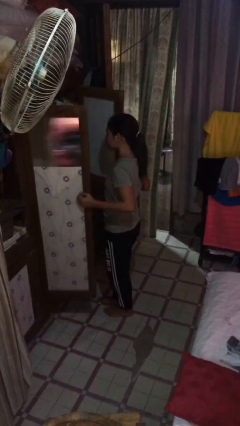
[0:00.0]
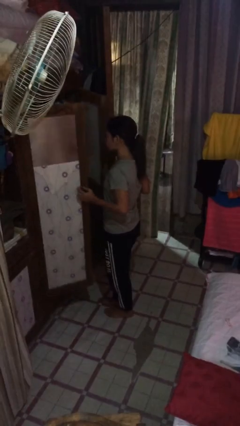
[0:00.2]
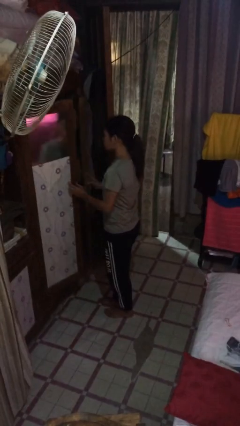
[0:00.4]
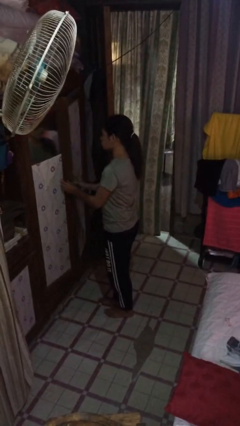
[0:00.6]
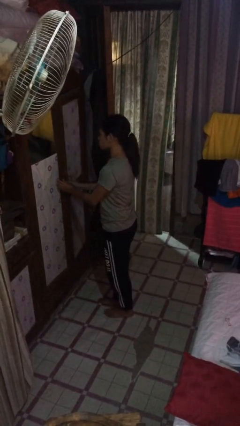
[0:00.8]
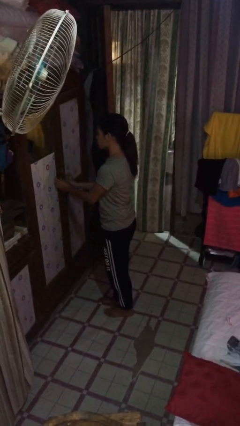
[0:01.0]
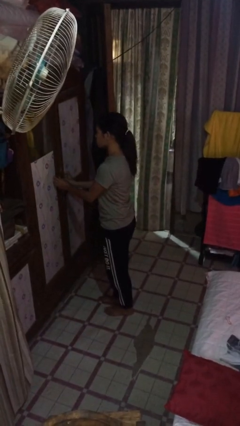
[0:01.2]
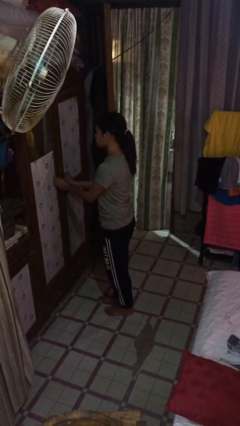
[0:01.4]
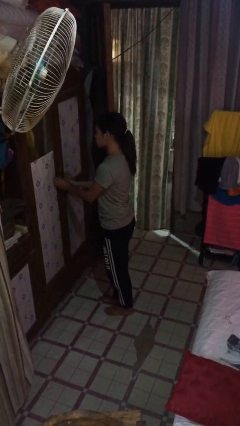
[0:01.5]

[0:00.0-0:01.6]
person closes closet door

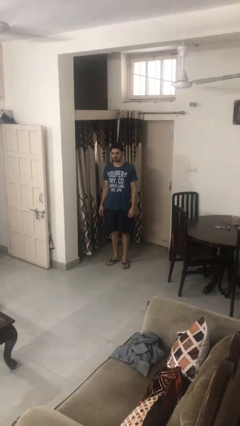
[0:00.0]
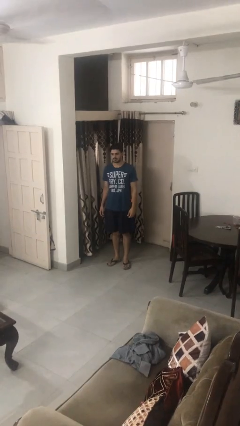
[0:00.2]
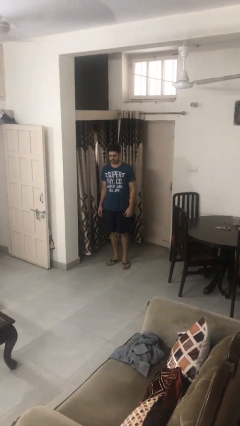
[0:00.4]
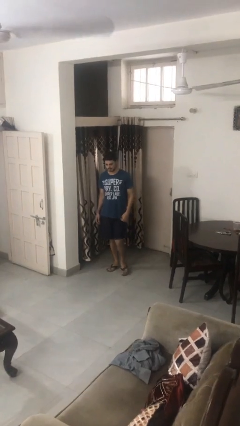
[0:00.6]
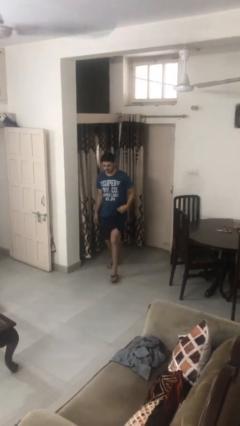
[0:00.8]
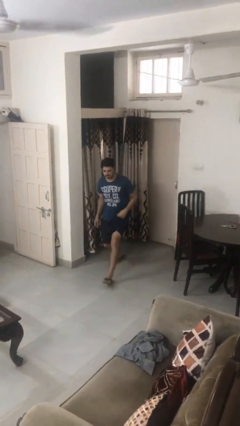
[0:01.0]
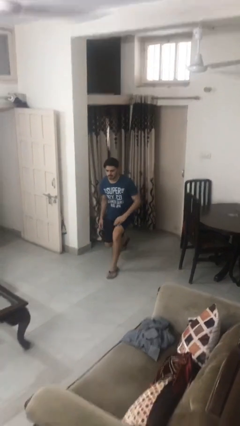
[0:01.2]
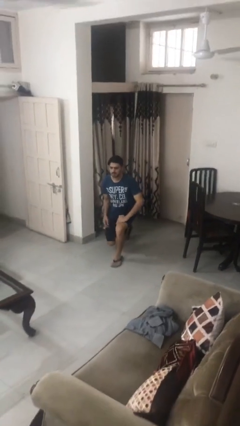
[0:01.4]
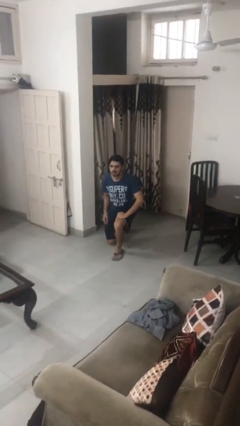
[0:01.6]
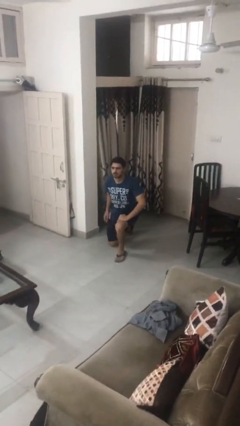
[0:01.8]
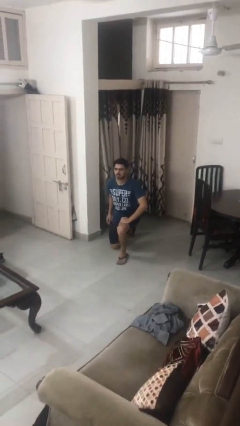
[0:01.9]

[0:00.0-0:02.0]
person kneels

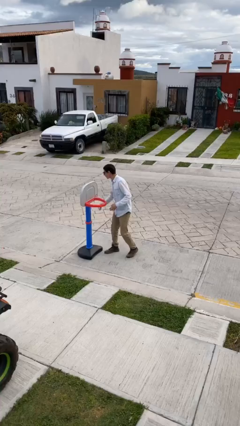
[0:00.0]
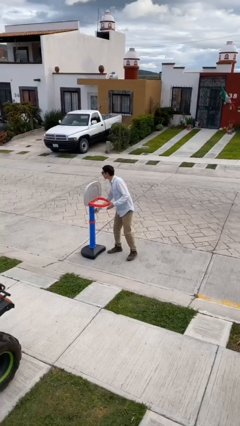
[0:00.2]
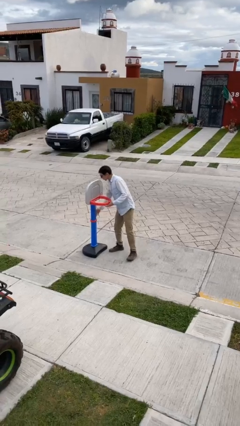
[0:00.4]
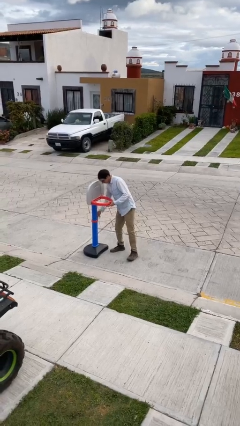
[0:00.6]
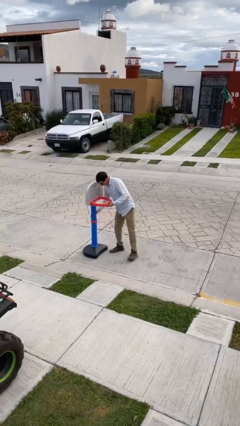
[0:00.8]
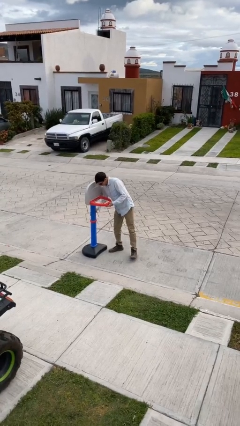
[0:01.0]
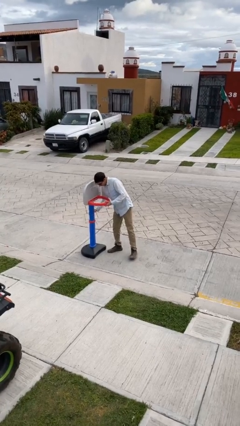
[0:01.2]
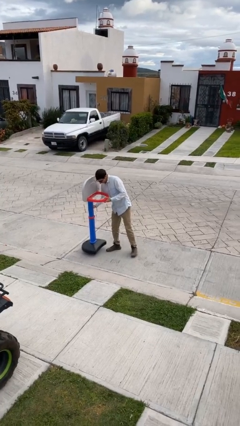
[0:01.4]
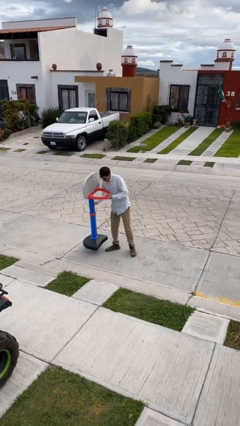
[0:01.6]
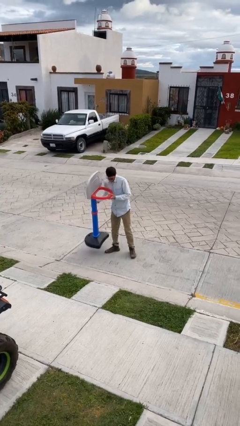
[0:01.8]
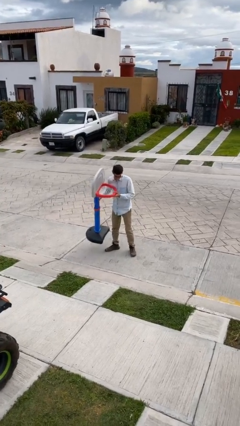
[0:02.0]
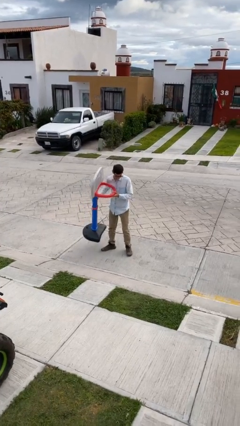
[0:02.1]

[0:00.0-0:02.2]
person picks up object from floor

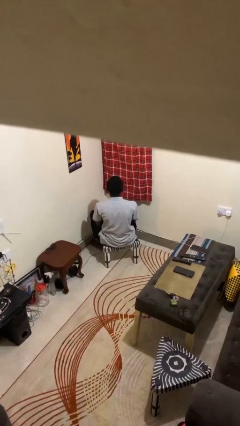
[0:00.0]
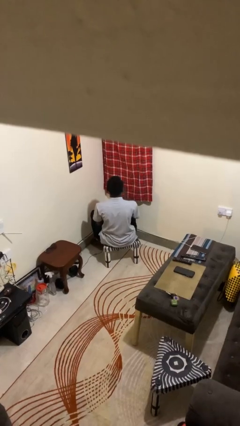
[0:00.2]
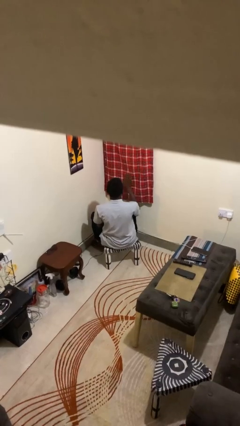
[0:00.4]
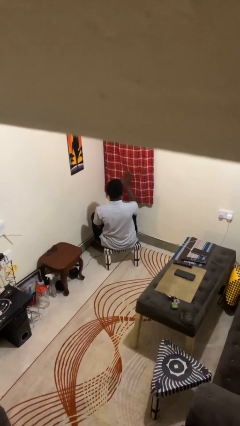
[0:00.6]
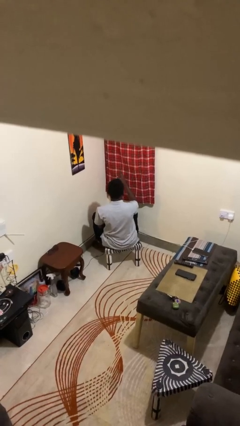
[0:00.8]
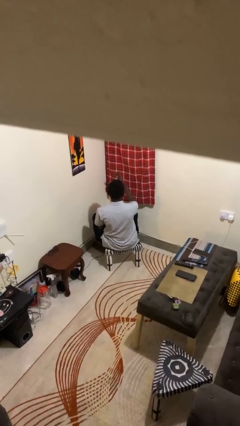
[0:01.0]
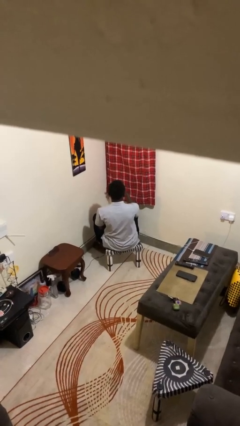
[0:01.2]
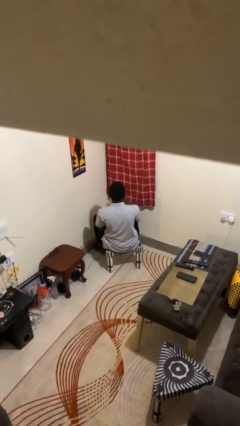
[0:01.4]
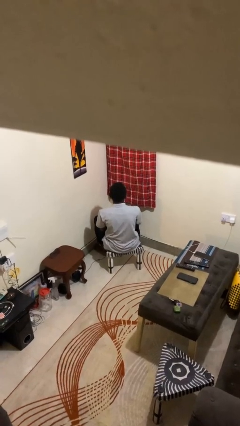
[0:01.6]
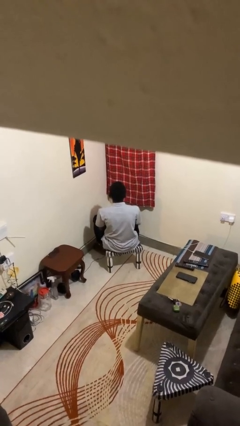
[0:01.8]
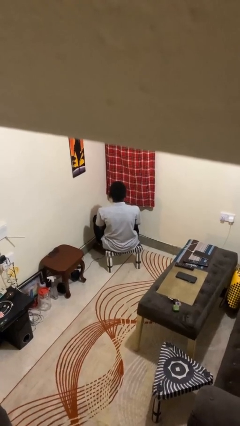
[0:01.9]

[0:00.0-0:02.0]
person gestures swipe left

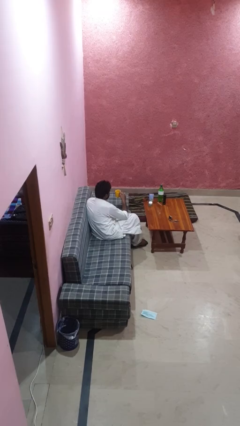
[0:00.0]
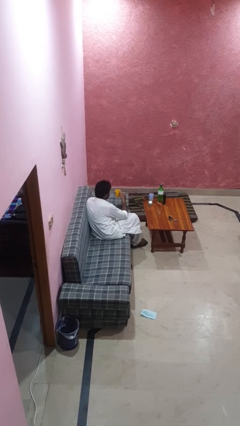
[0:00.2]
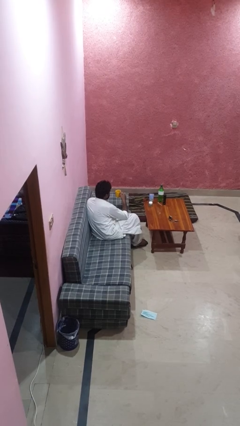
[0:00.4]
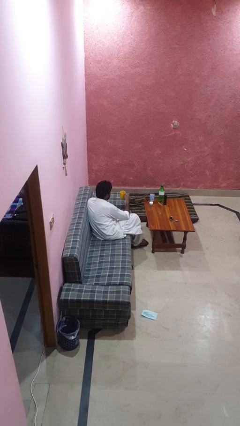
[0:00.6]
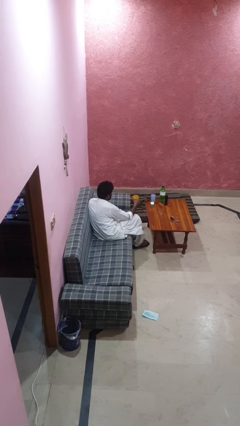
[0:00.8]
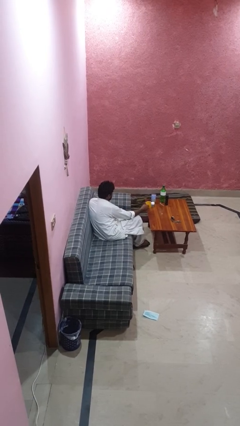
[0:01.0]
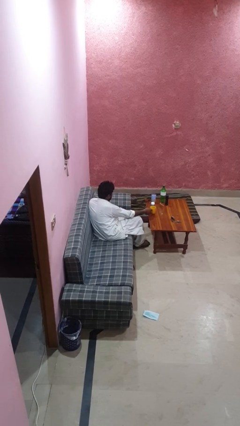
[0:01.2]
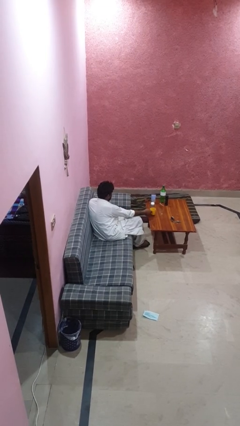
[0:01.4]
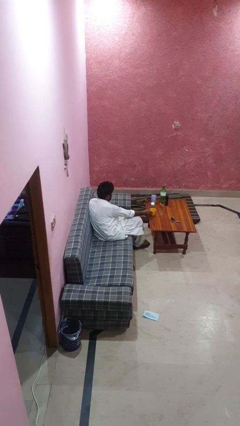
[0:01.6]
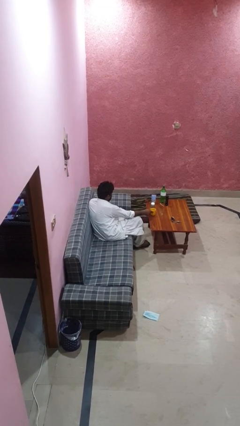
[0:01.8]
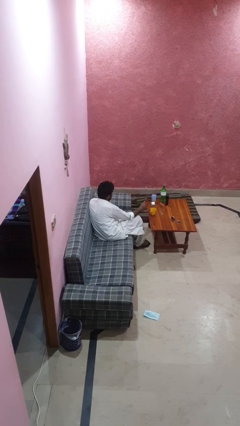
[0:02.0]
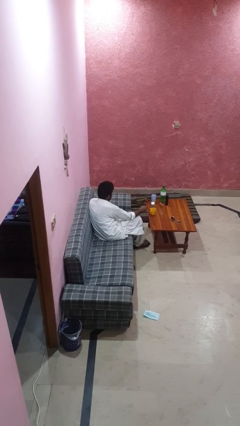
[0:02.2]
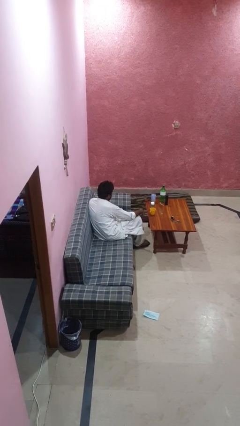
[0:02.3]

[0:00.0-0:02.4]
person puts down object on table

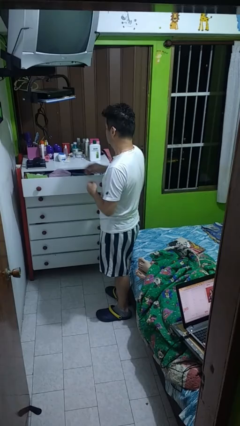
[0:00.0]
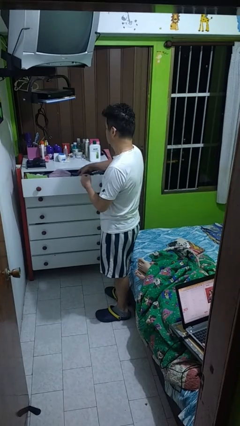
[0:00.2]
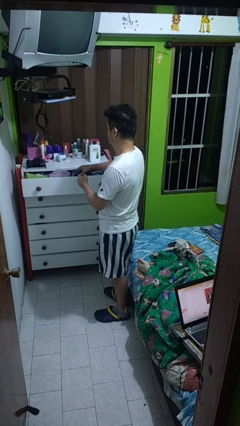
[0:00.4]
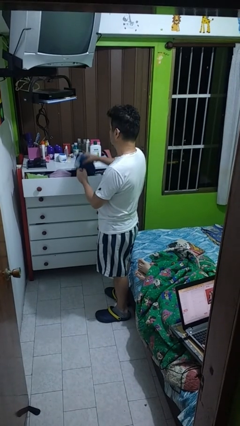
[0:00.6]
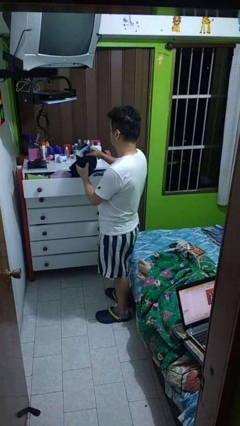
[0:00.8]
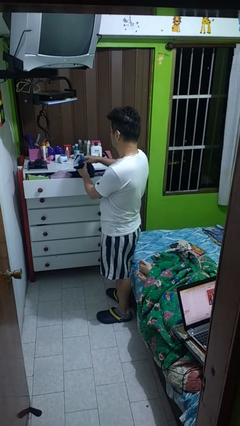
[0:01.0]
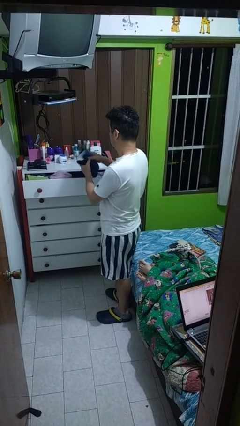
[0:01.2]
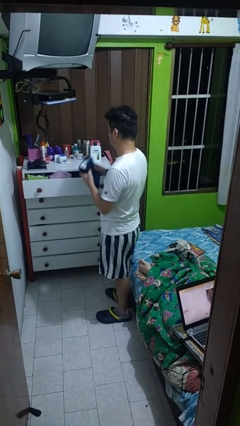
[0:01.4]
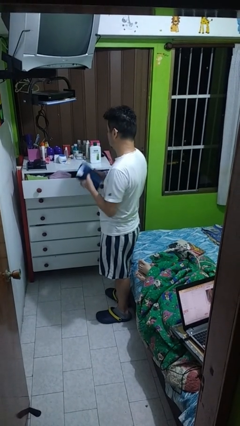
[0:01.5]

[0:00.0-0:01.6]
person takes clothes from dresser

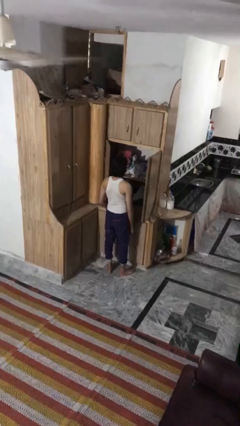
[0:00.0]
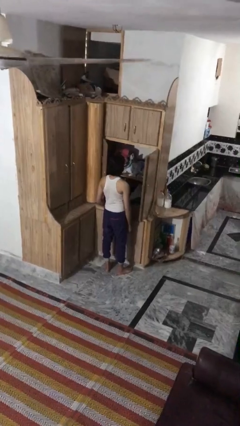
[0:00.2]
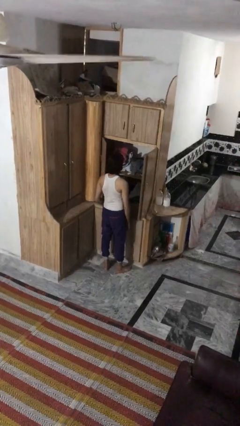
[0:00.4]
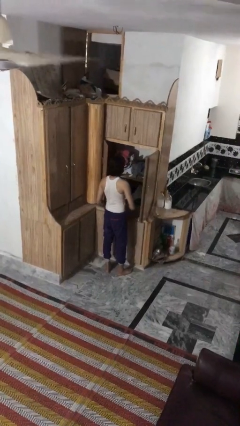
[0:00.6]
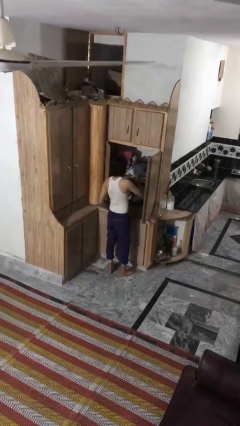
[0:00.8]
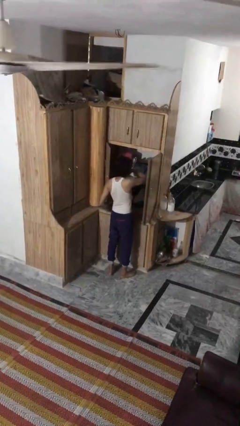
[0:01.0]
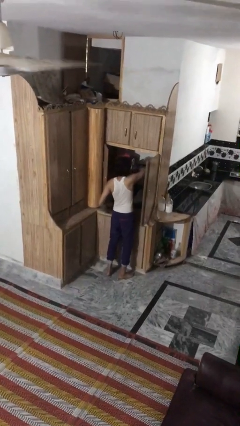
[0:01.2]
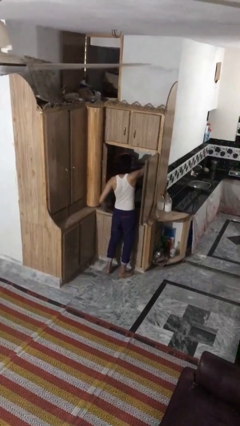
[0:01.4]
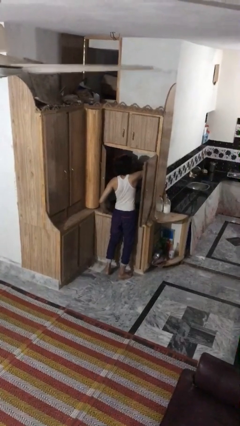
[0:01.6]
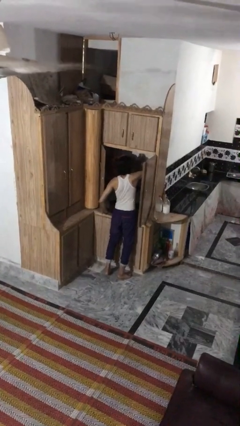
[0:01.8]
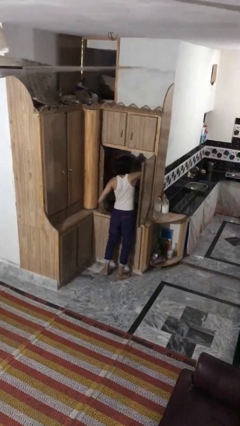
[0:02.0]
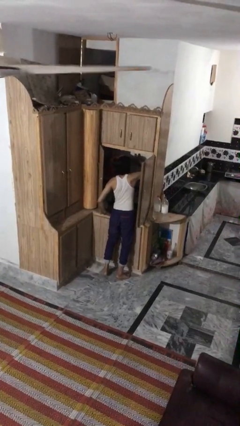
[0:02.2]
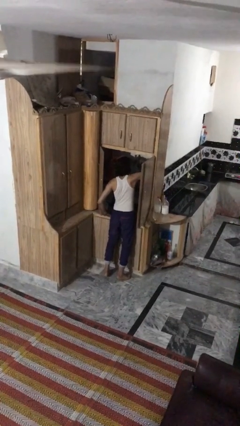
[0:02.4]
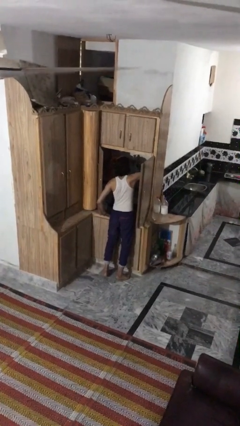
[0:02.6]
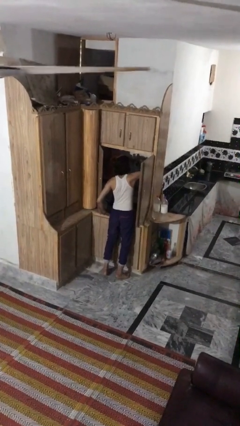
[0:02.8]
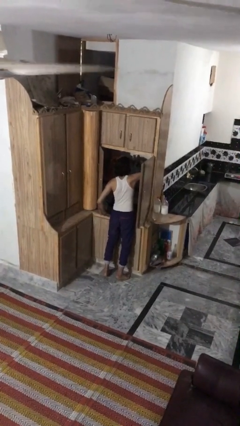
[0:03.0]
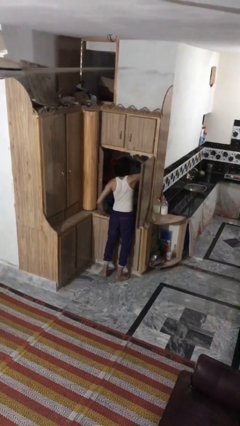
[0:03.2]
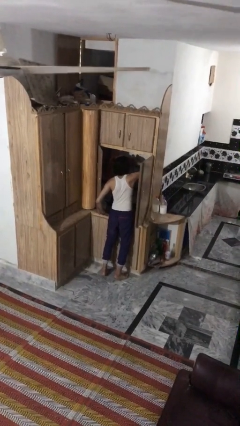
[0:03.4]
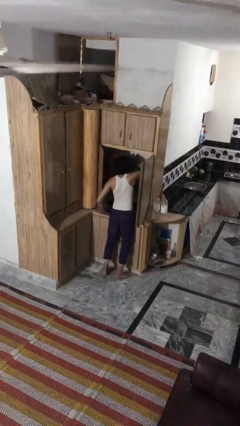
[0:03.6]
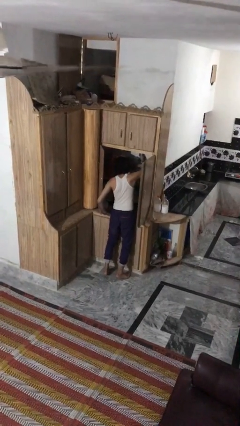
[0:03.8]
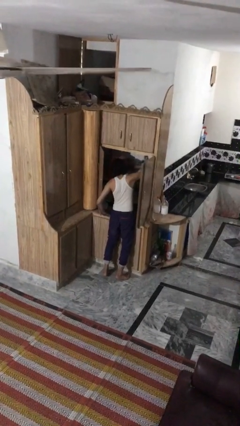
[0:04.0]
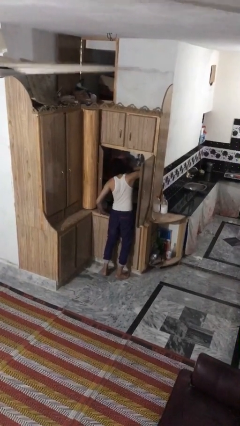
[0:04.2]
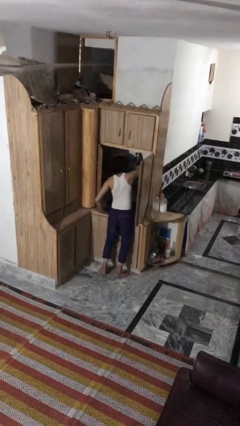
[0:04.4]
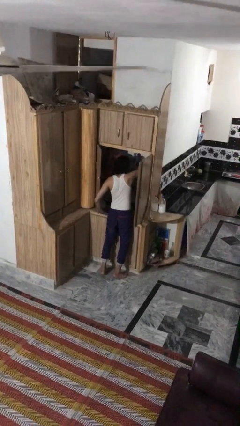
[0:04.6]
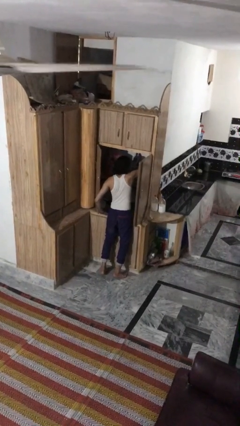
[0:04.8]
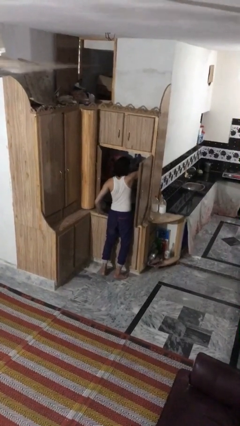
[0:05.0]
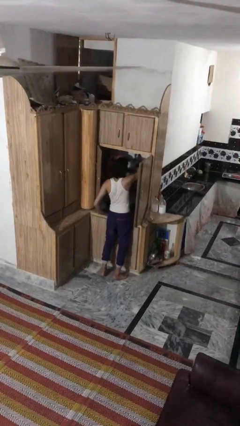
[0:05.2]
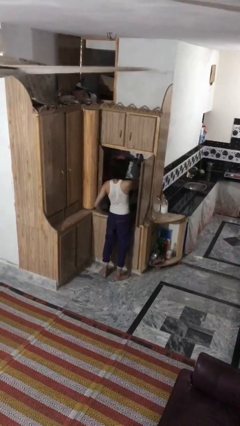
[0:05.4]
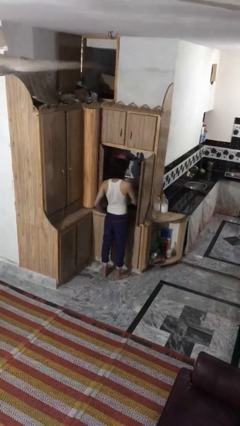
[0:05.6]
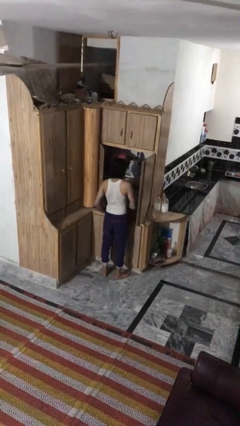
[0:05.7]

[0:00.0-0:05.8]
person searches in cabinet
